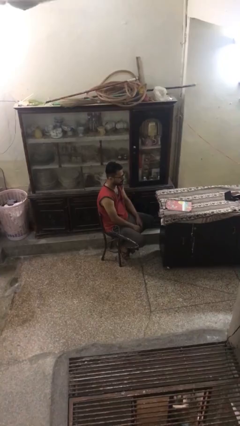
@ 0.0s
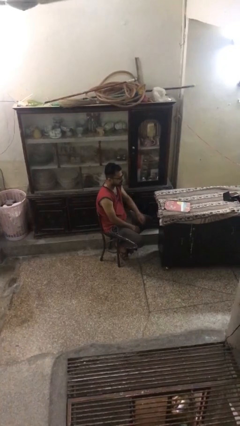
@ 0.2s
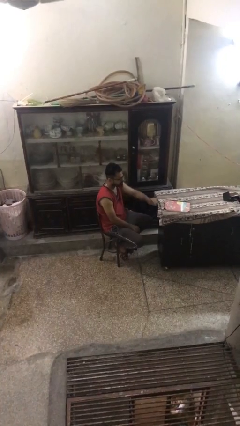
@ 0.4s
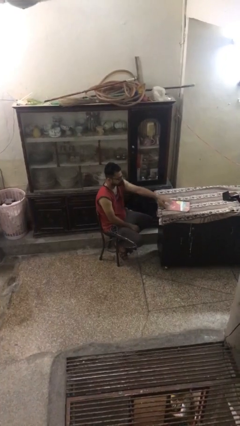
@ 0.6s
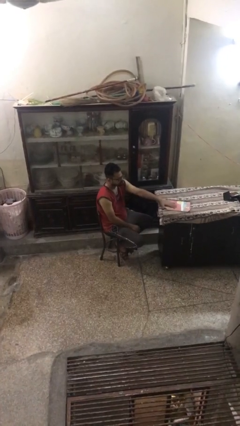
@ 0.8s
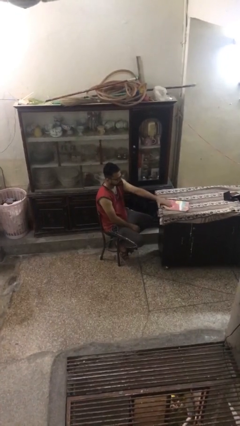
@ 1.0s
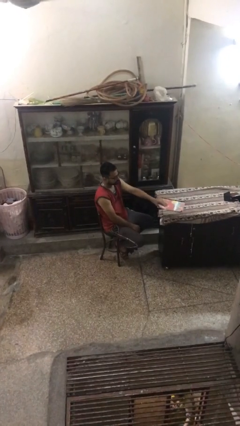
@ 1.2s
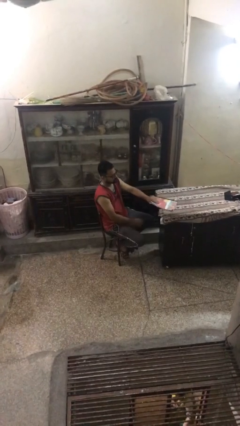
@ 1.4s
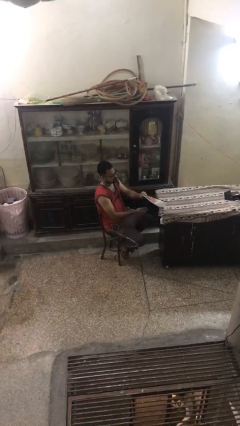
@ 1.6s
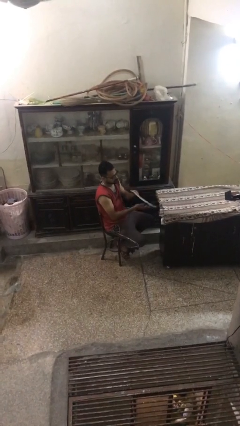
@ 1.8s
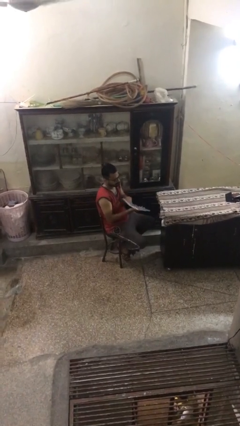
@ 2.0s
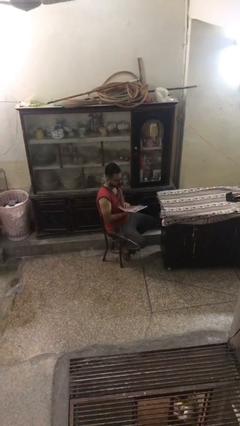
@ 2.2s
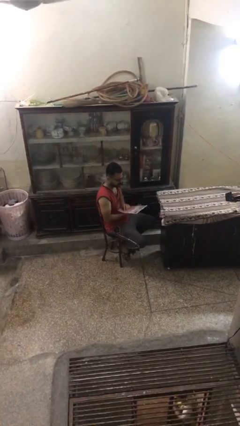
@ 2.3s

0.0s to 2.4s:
person picks up object from table

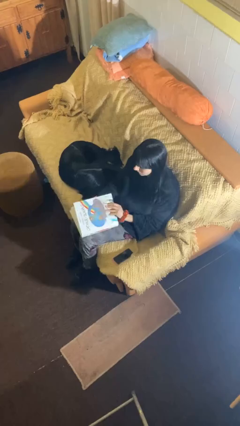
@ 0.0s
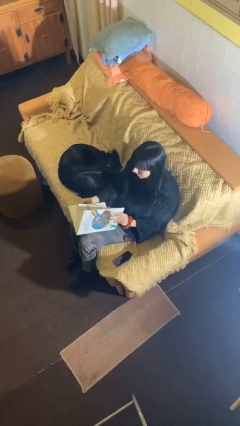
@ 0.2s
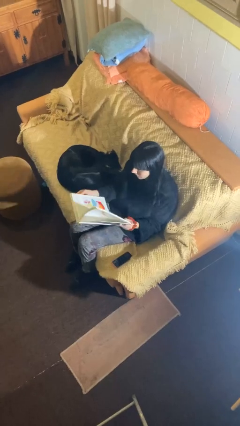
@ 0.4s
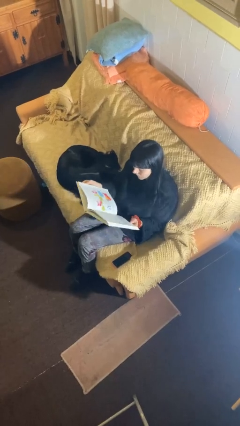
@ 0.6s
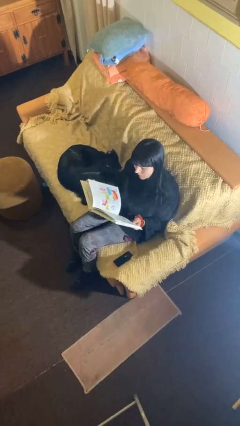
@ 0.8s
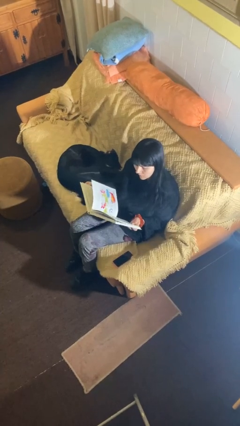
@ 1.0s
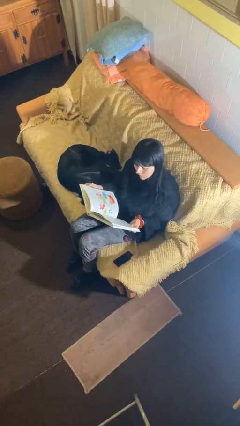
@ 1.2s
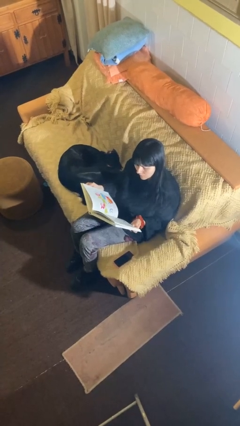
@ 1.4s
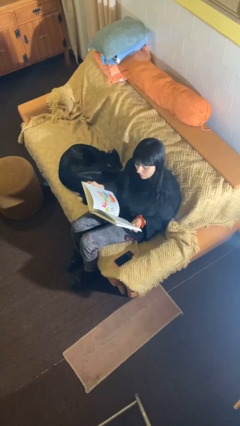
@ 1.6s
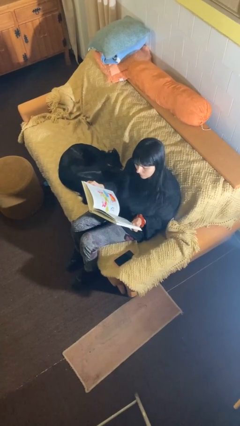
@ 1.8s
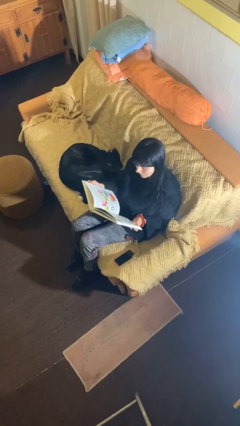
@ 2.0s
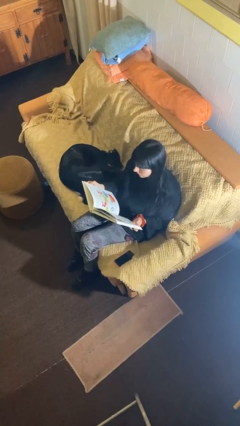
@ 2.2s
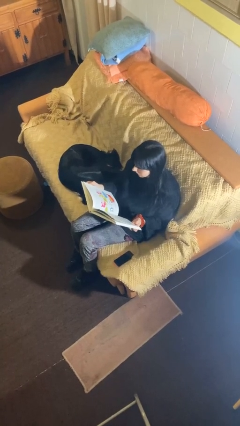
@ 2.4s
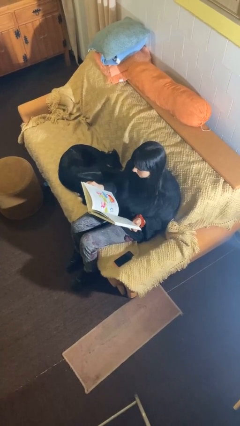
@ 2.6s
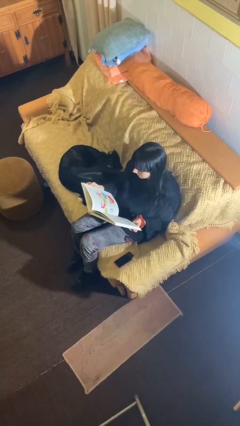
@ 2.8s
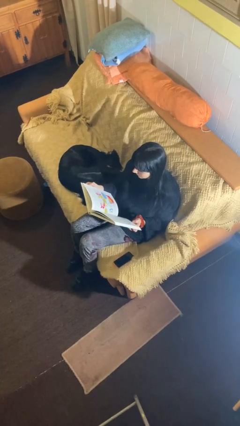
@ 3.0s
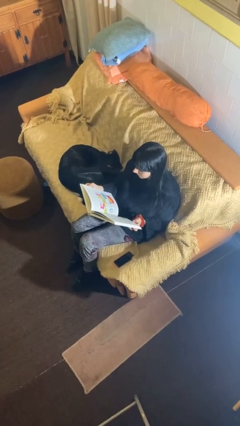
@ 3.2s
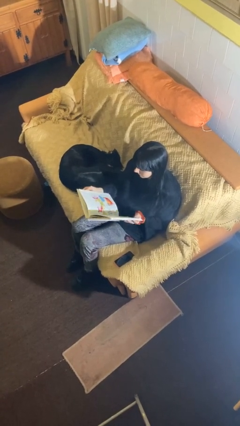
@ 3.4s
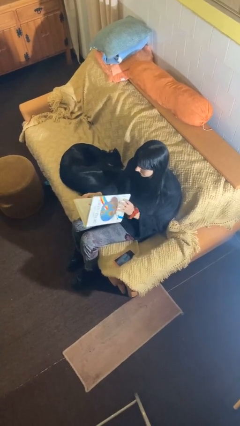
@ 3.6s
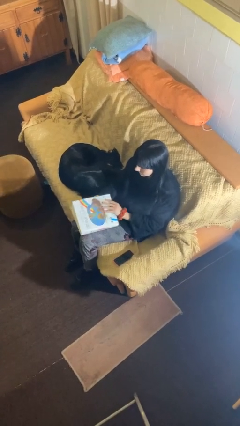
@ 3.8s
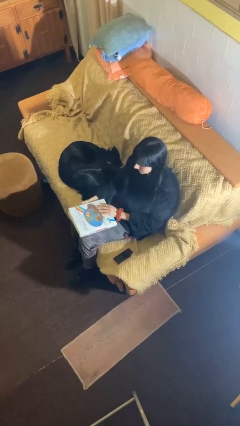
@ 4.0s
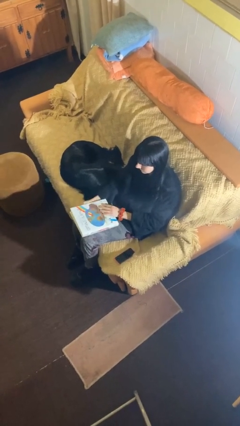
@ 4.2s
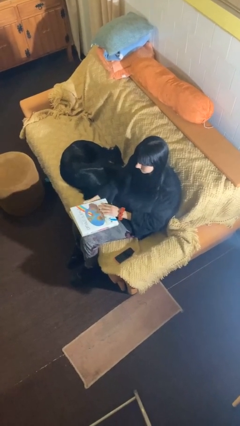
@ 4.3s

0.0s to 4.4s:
person reads document

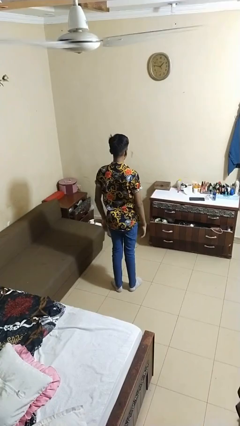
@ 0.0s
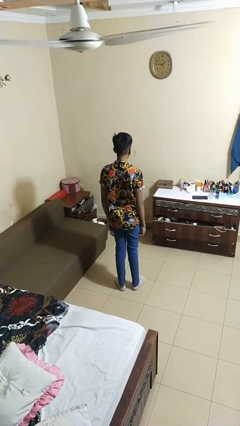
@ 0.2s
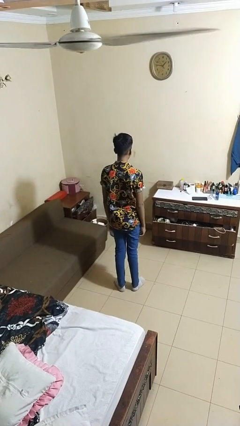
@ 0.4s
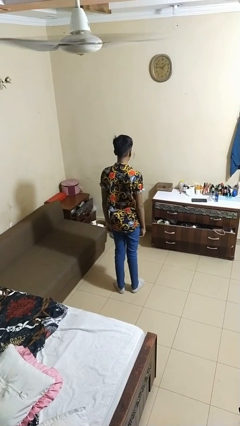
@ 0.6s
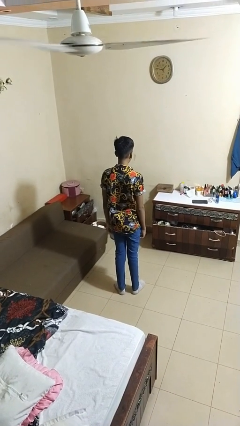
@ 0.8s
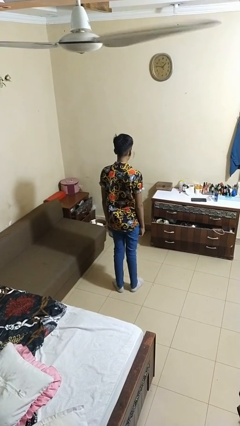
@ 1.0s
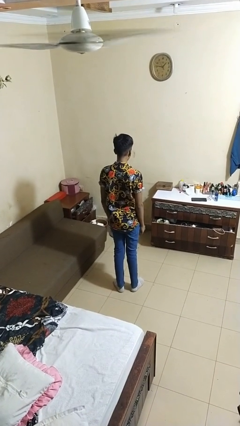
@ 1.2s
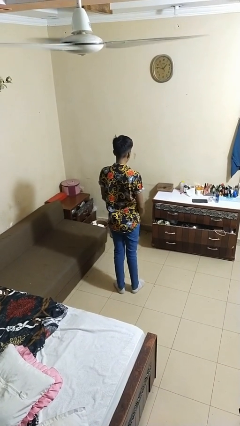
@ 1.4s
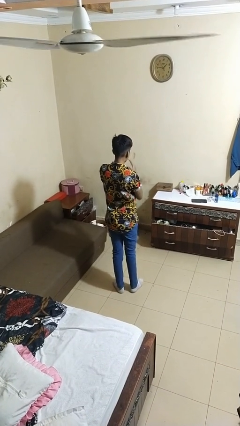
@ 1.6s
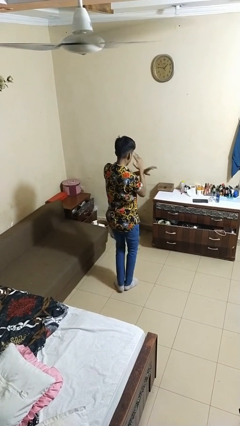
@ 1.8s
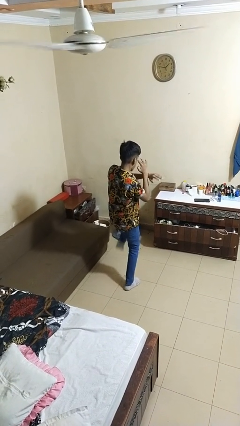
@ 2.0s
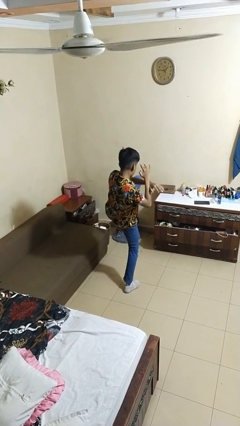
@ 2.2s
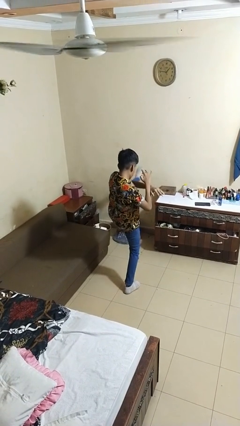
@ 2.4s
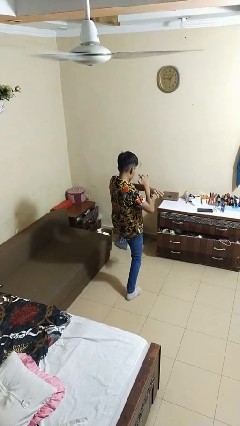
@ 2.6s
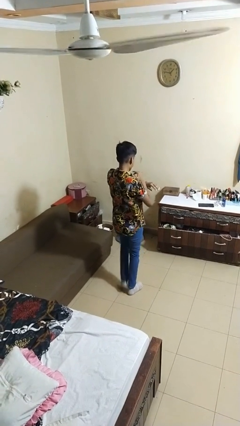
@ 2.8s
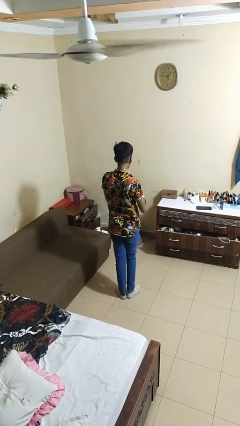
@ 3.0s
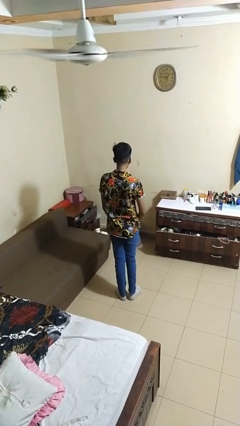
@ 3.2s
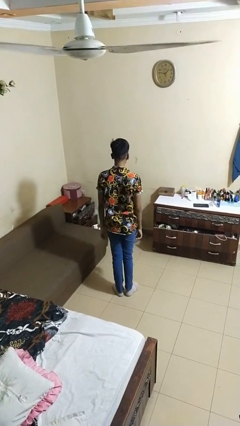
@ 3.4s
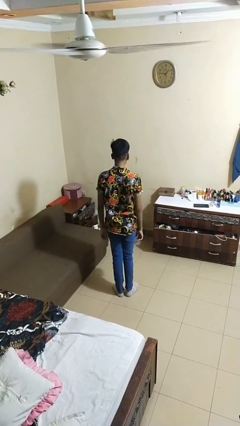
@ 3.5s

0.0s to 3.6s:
person karate kicks

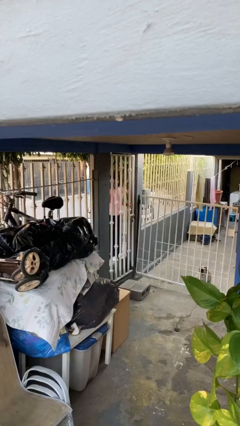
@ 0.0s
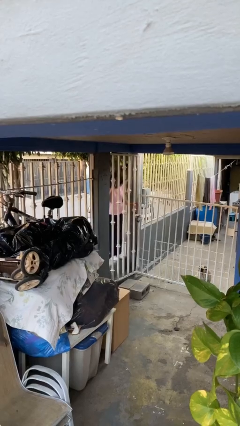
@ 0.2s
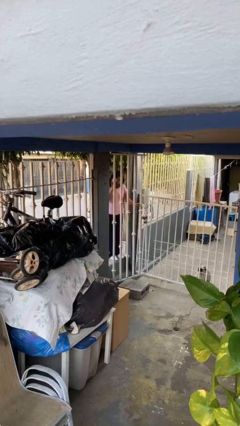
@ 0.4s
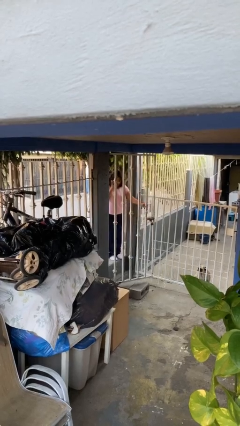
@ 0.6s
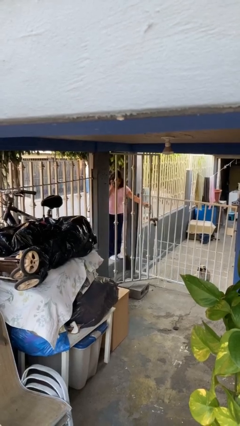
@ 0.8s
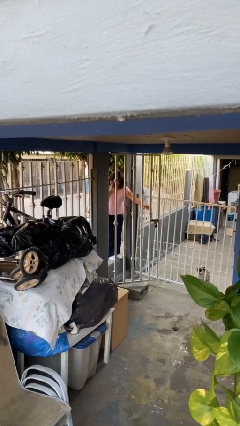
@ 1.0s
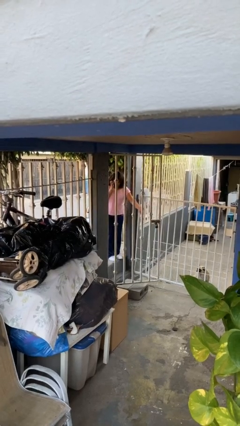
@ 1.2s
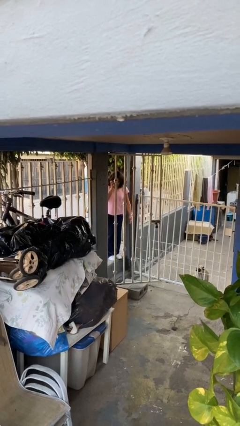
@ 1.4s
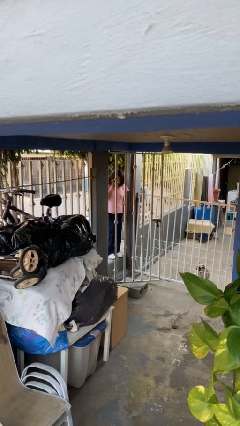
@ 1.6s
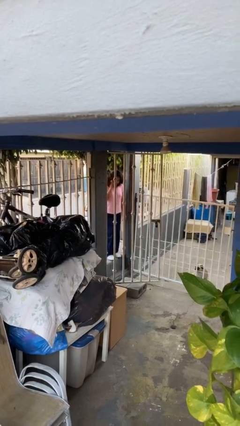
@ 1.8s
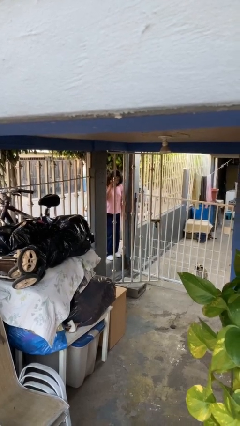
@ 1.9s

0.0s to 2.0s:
person opens facility door

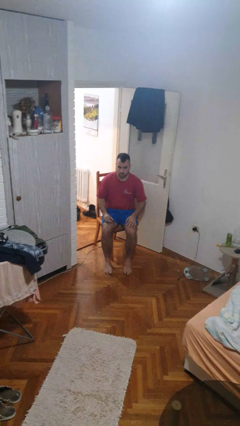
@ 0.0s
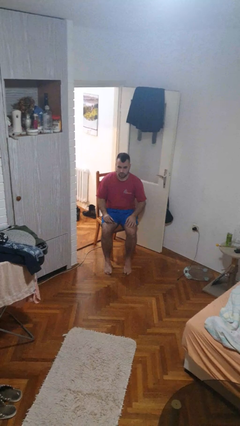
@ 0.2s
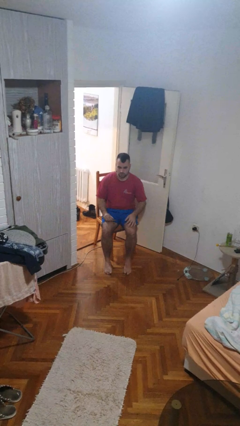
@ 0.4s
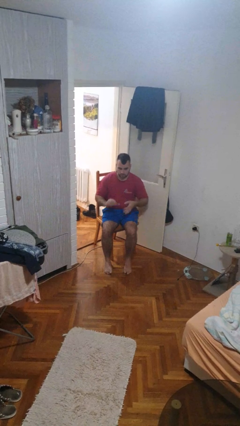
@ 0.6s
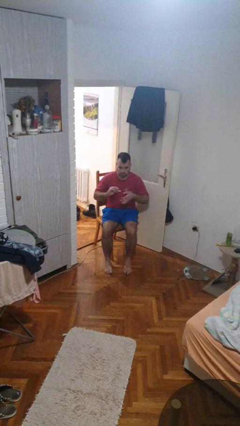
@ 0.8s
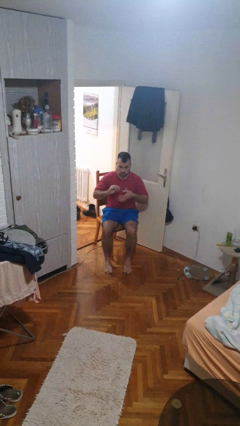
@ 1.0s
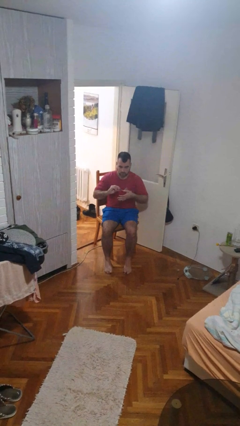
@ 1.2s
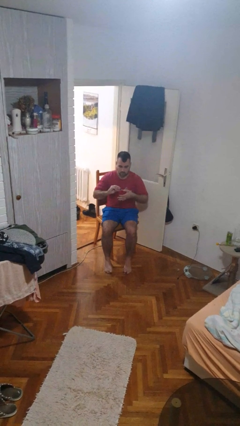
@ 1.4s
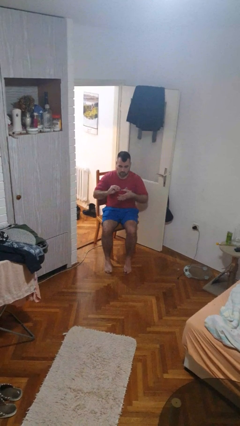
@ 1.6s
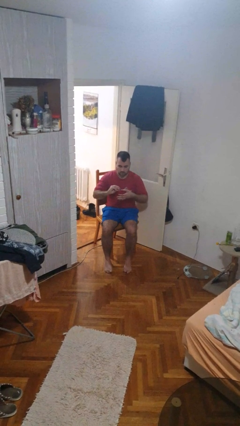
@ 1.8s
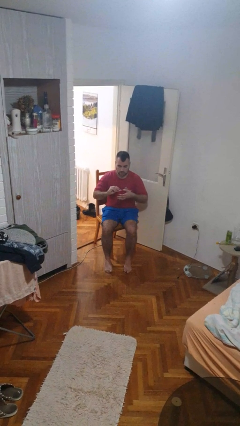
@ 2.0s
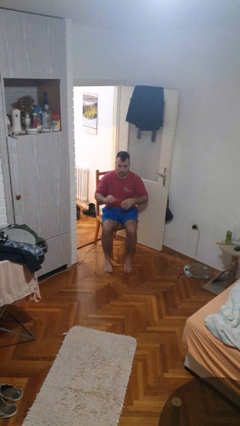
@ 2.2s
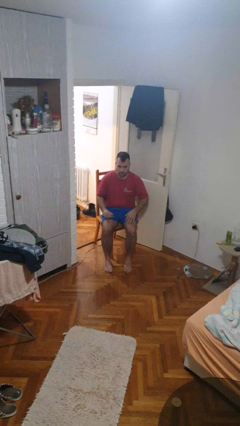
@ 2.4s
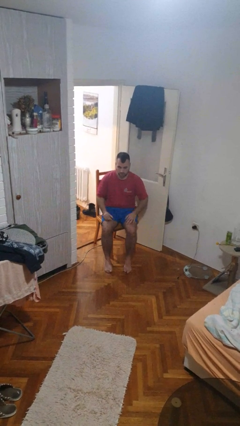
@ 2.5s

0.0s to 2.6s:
person clips fingernails

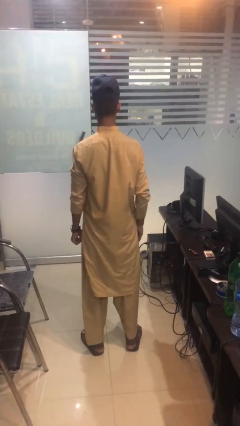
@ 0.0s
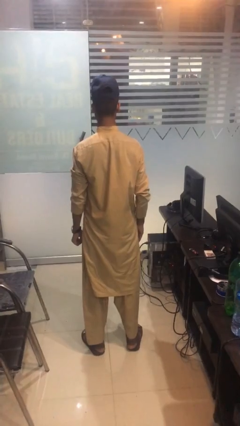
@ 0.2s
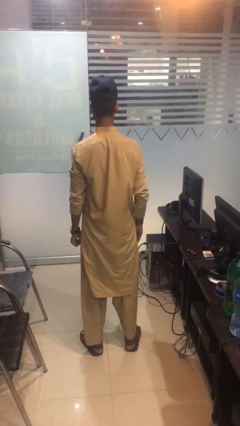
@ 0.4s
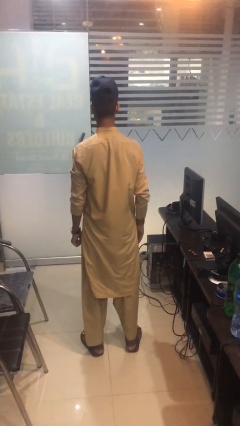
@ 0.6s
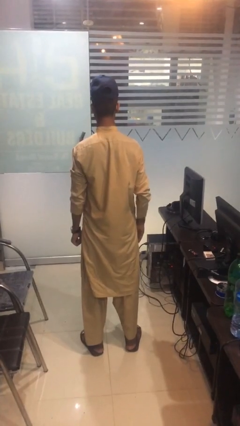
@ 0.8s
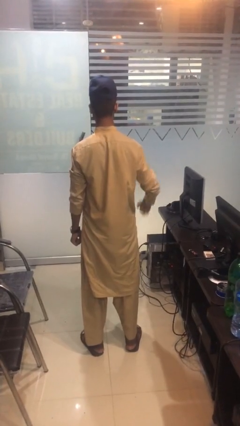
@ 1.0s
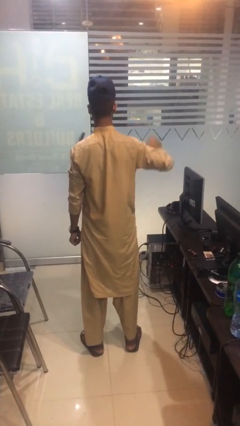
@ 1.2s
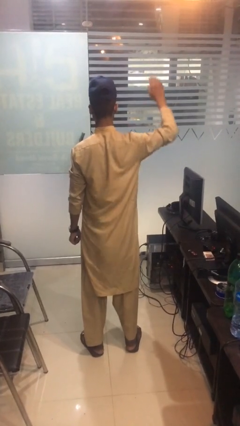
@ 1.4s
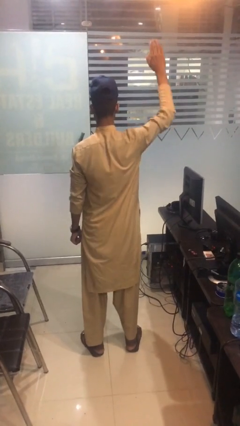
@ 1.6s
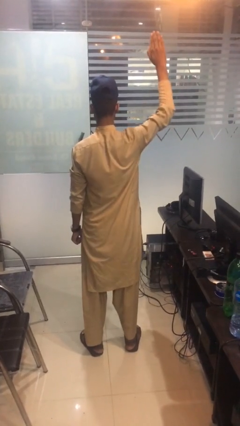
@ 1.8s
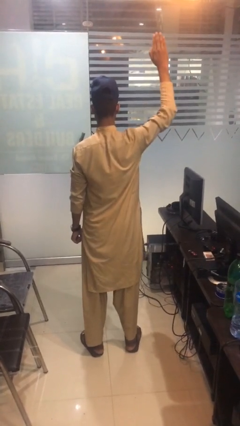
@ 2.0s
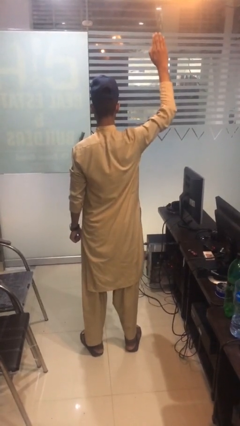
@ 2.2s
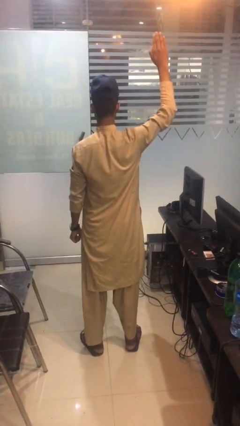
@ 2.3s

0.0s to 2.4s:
person gestures raise hand

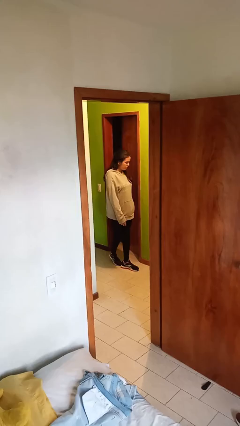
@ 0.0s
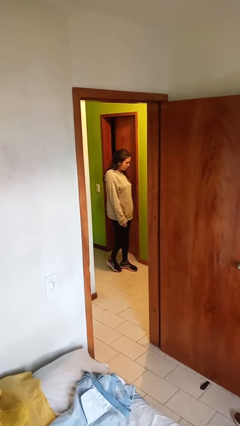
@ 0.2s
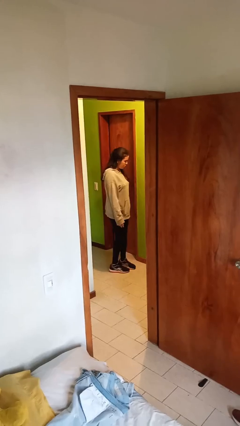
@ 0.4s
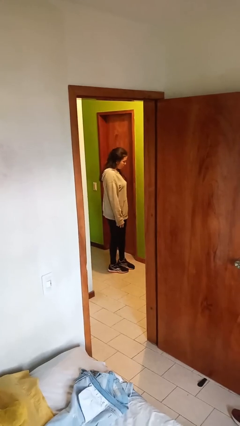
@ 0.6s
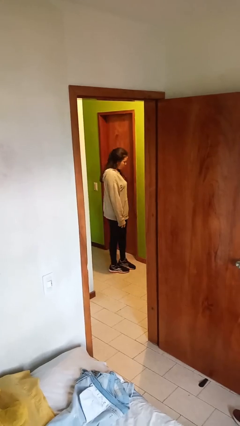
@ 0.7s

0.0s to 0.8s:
person closes facility door
